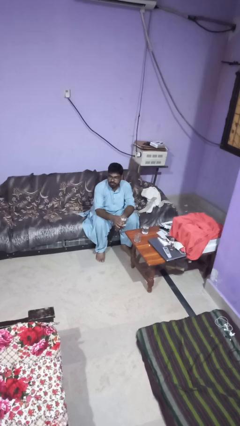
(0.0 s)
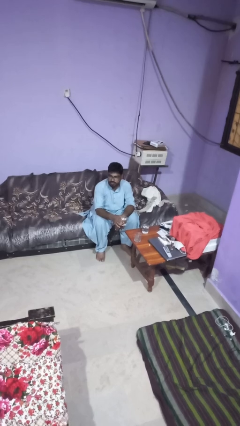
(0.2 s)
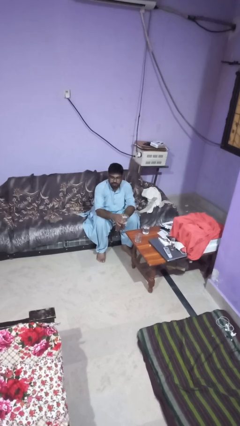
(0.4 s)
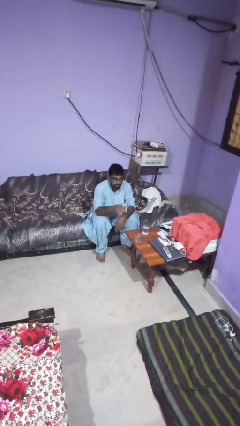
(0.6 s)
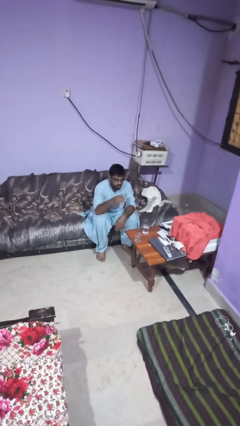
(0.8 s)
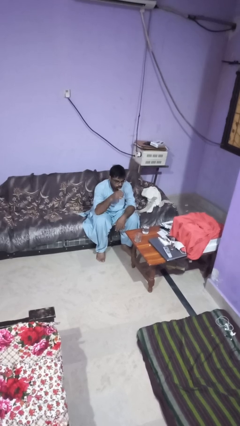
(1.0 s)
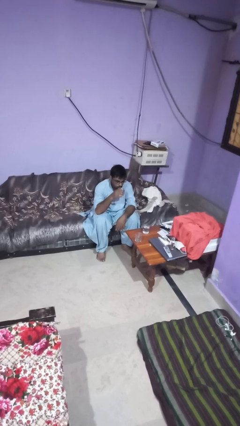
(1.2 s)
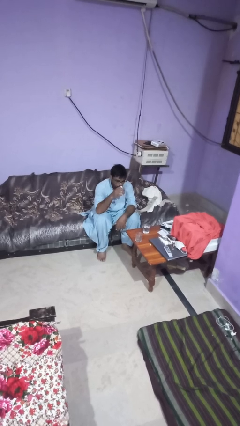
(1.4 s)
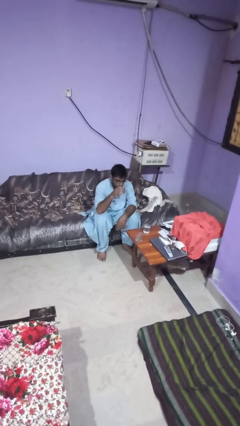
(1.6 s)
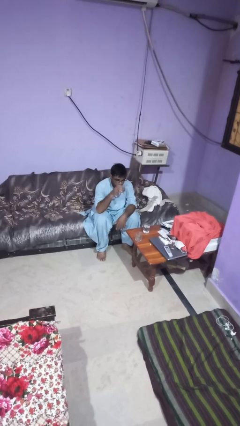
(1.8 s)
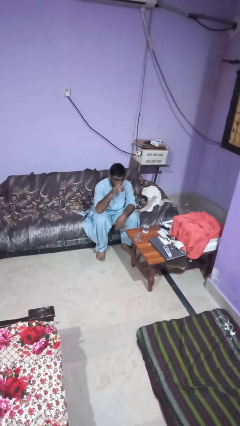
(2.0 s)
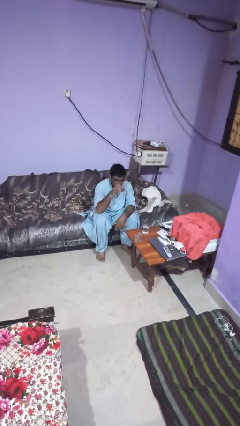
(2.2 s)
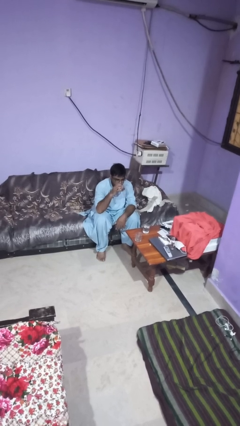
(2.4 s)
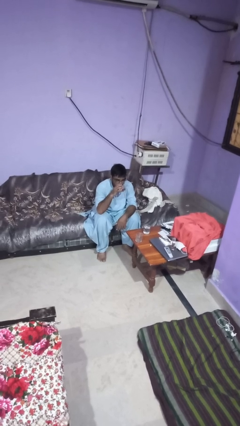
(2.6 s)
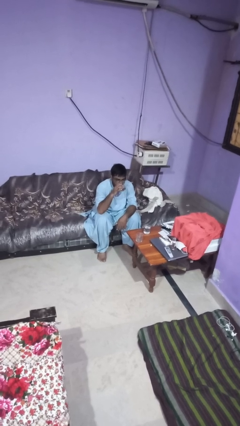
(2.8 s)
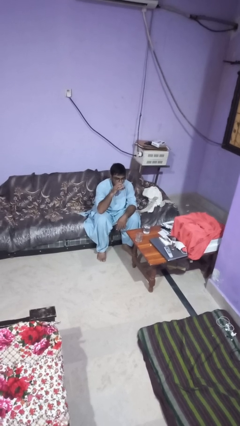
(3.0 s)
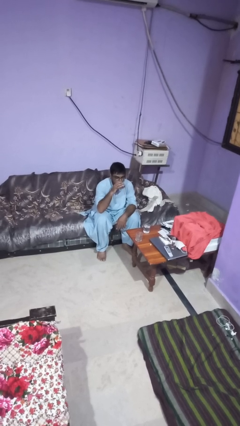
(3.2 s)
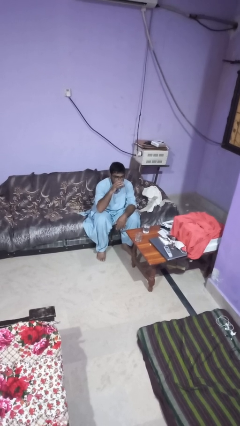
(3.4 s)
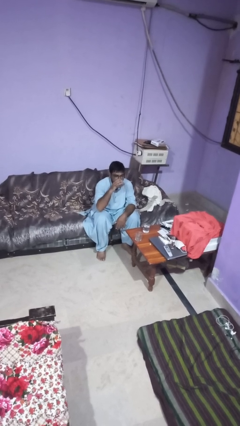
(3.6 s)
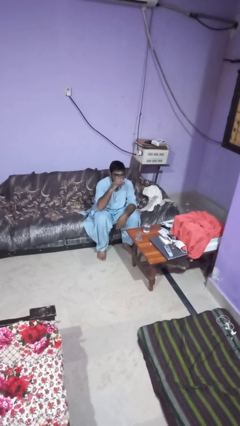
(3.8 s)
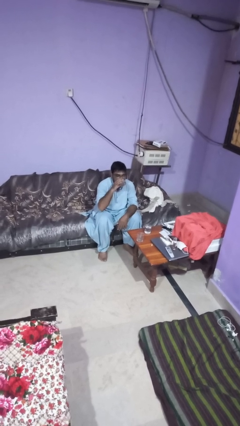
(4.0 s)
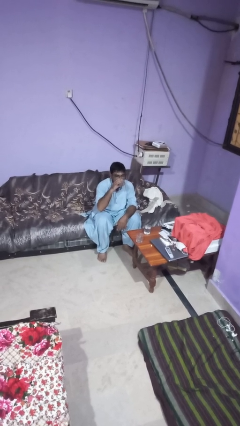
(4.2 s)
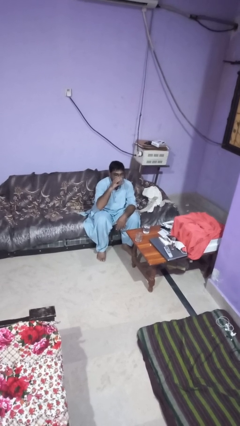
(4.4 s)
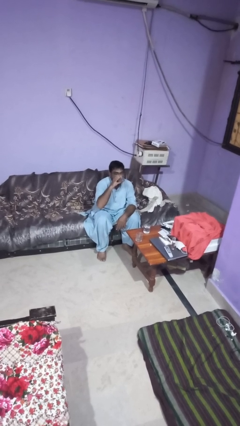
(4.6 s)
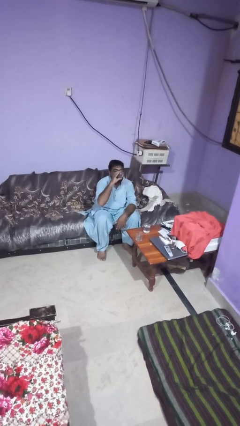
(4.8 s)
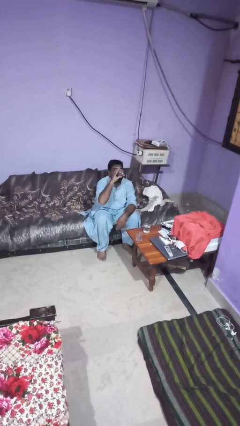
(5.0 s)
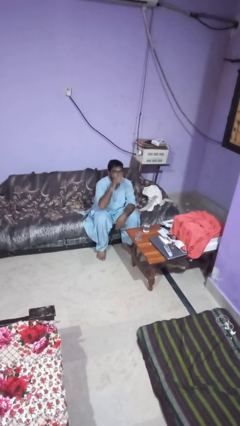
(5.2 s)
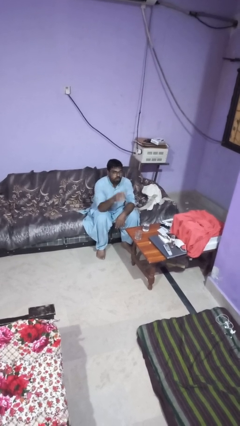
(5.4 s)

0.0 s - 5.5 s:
person drinks from shotglass

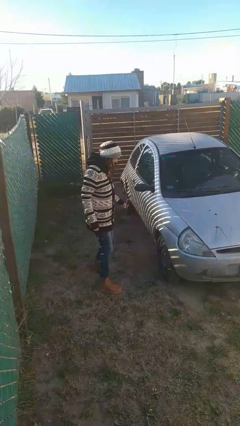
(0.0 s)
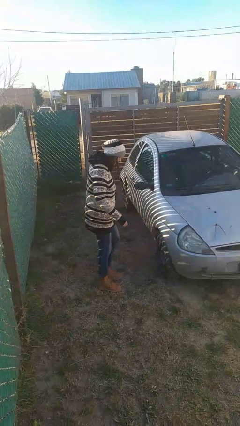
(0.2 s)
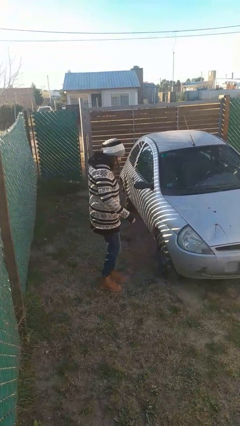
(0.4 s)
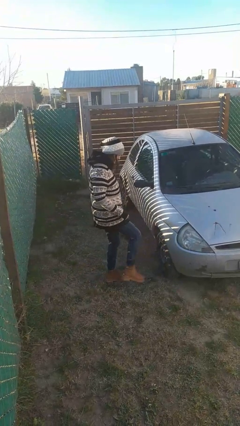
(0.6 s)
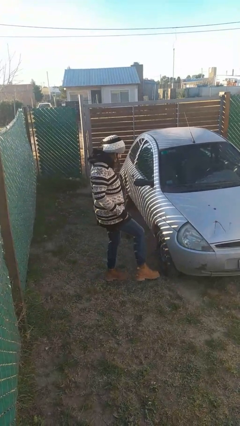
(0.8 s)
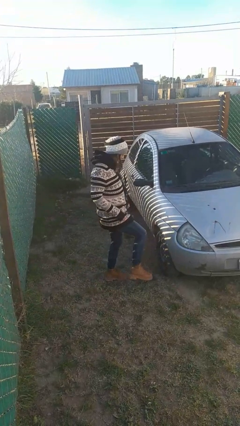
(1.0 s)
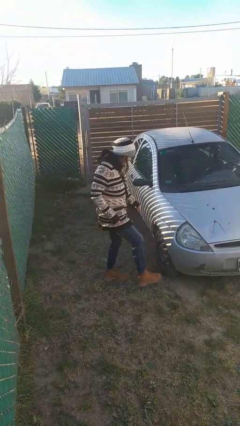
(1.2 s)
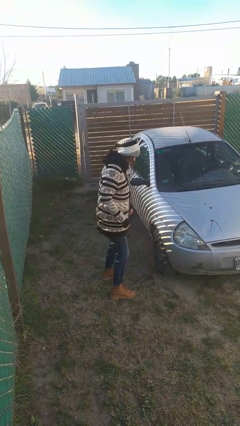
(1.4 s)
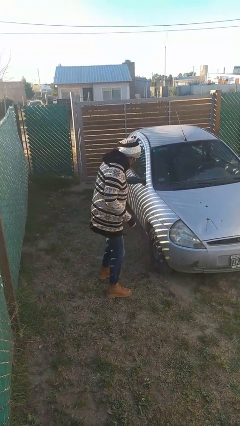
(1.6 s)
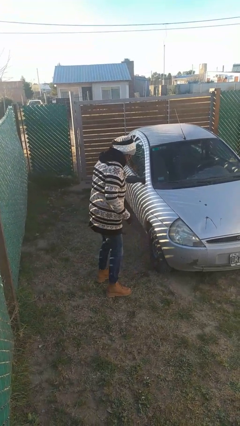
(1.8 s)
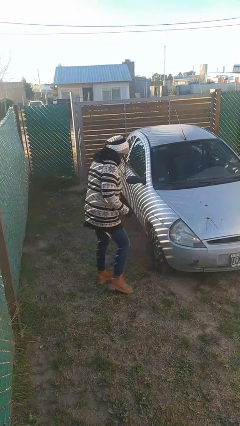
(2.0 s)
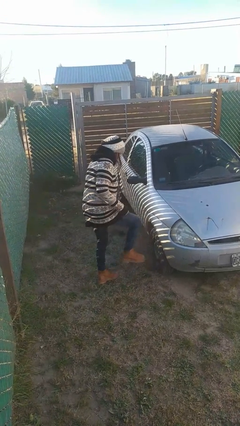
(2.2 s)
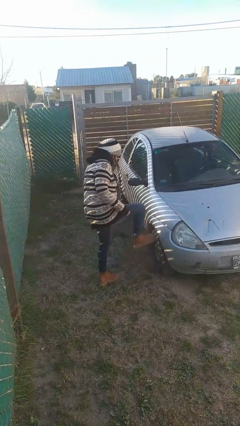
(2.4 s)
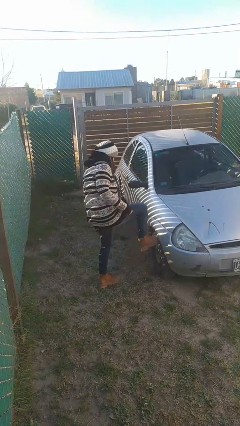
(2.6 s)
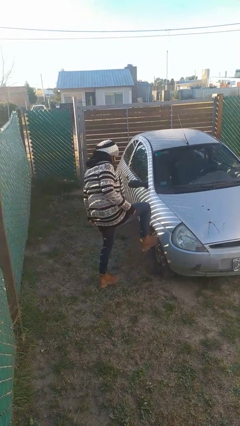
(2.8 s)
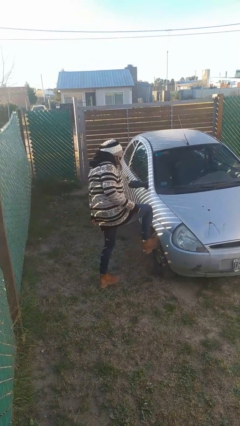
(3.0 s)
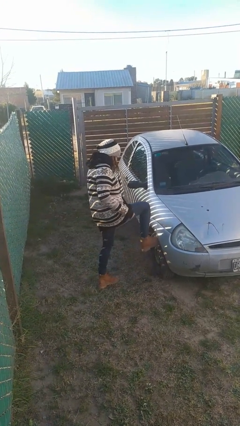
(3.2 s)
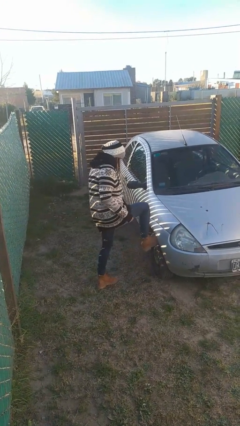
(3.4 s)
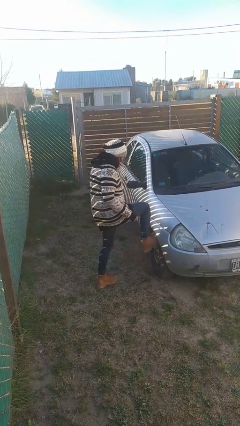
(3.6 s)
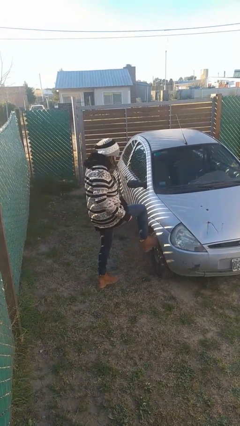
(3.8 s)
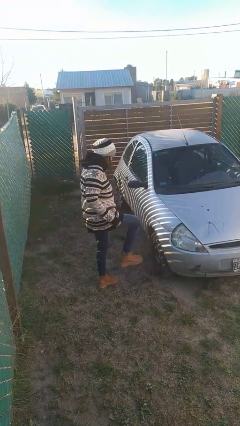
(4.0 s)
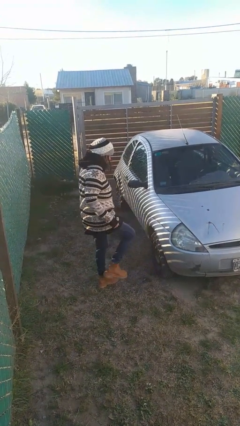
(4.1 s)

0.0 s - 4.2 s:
person kicks car tires

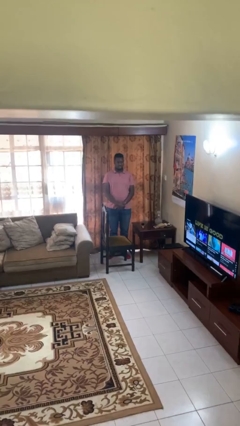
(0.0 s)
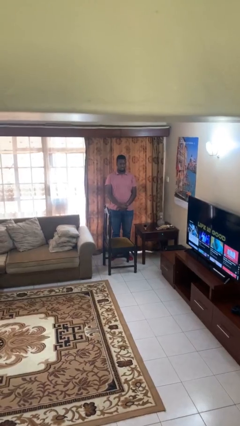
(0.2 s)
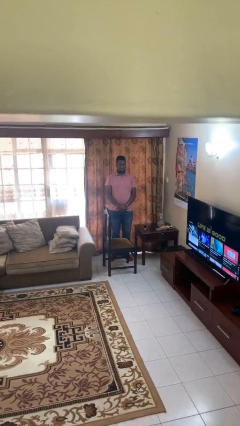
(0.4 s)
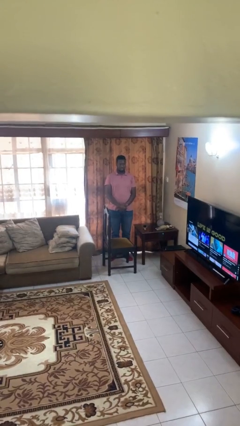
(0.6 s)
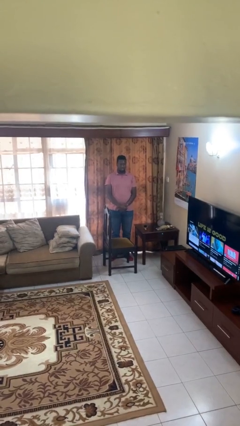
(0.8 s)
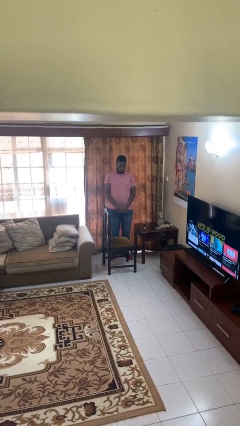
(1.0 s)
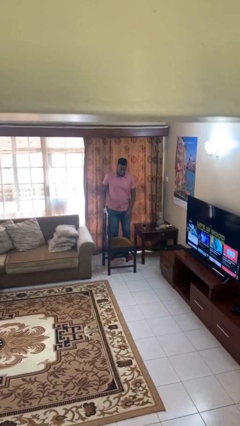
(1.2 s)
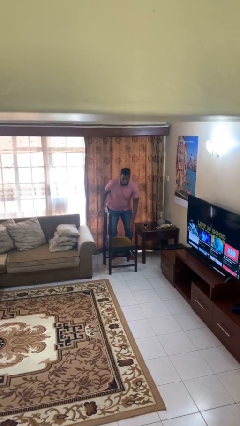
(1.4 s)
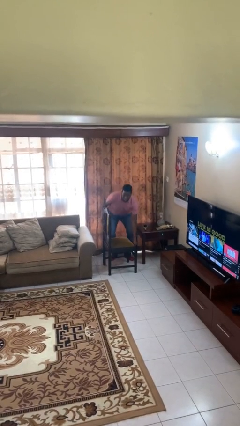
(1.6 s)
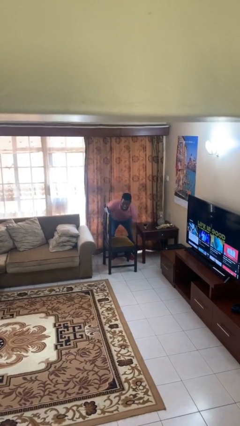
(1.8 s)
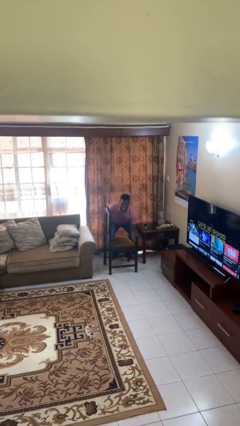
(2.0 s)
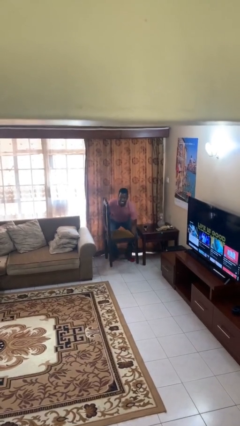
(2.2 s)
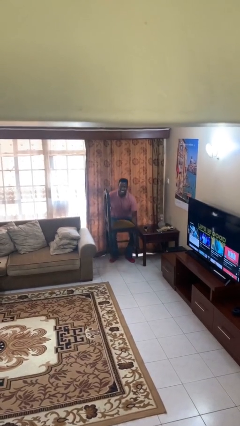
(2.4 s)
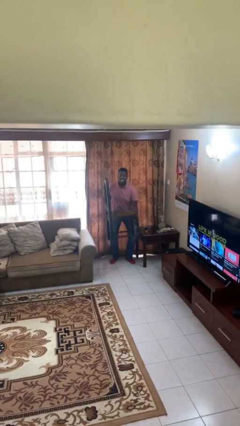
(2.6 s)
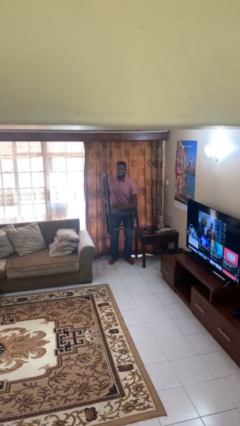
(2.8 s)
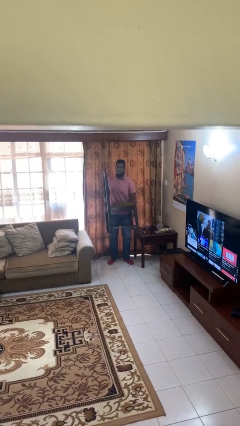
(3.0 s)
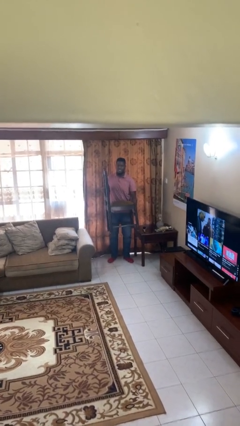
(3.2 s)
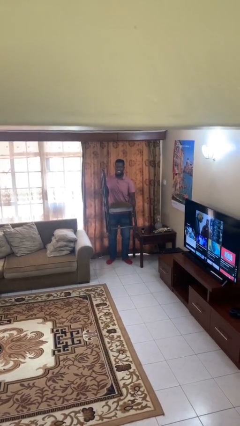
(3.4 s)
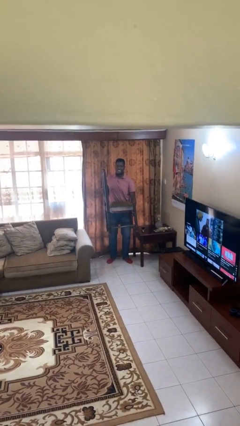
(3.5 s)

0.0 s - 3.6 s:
person picks up object from floor

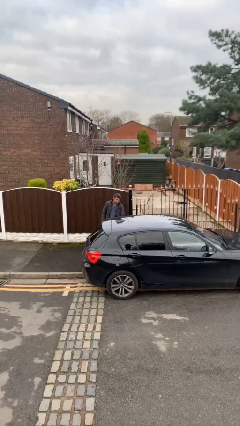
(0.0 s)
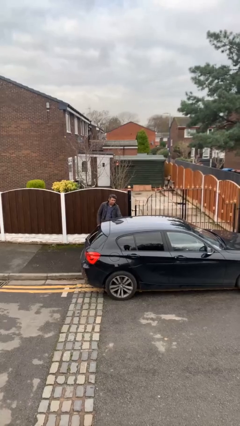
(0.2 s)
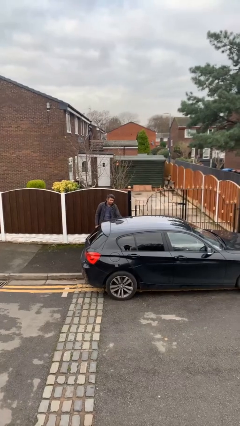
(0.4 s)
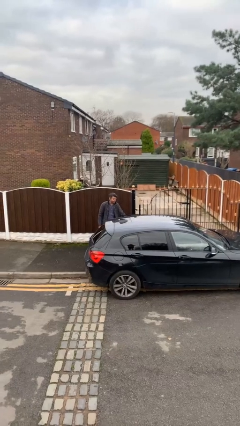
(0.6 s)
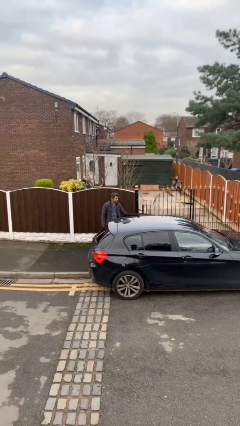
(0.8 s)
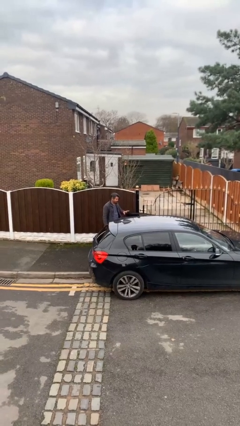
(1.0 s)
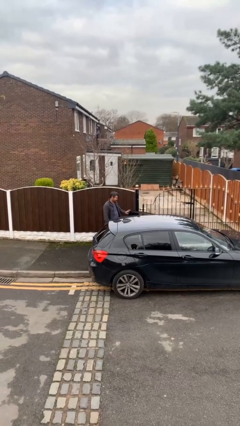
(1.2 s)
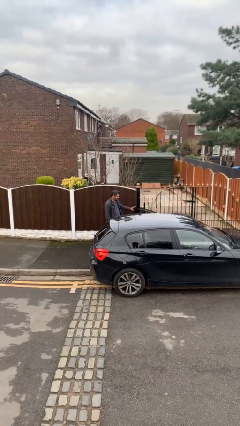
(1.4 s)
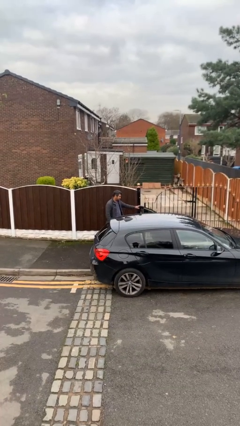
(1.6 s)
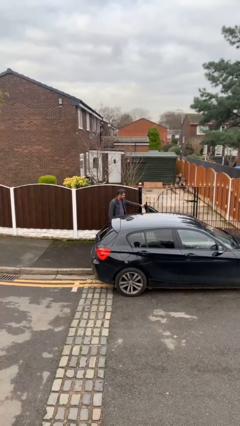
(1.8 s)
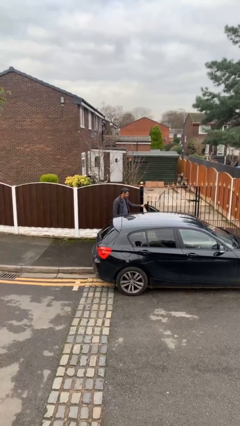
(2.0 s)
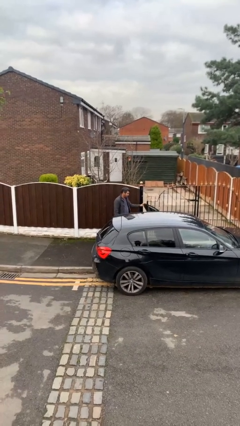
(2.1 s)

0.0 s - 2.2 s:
person opens car door

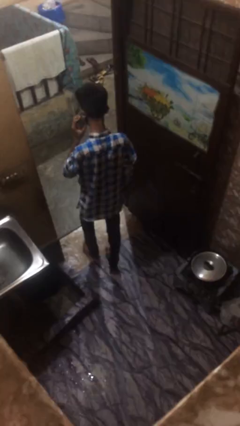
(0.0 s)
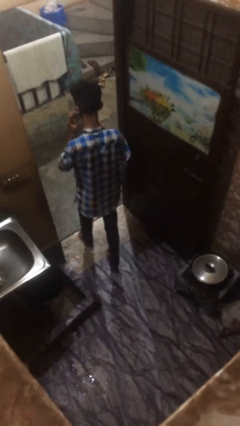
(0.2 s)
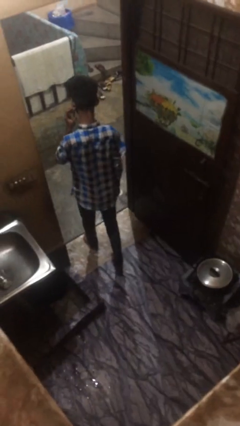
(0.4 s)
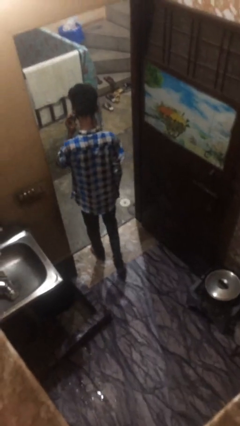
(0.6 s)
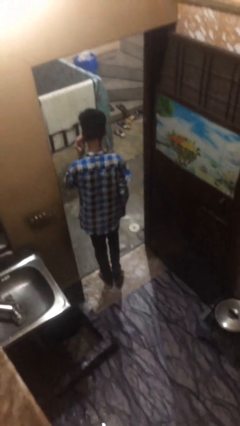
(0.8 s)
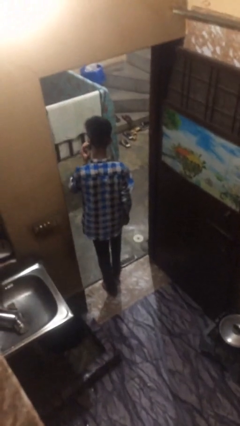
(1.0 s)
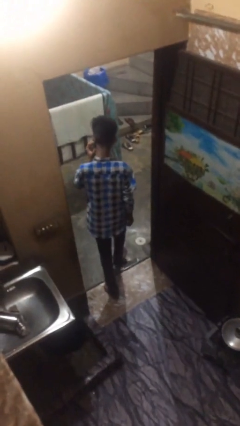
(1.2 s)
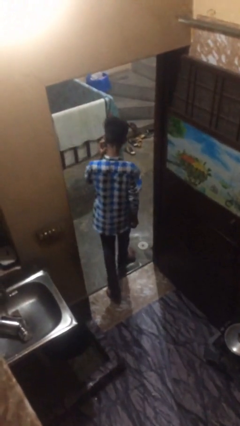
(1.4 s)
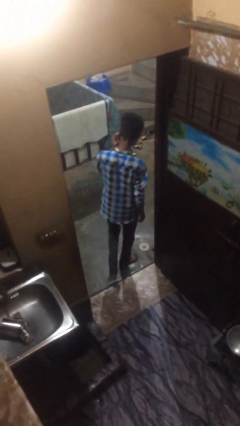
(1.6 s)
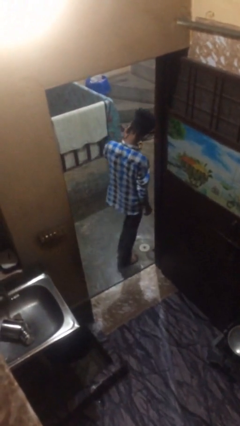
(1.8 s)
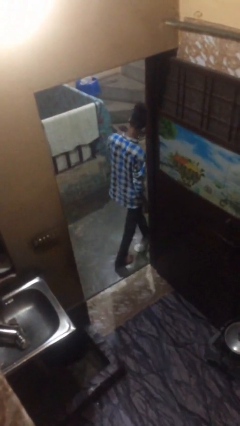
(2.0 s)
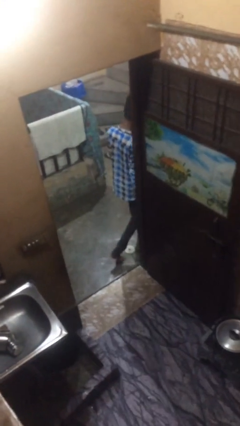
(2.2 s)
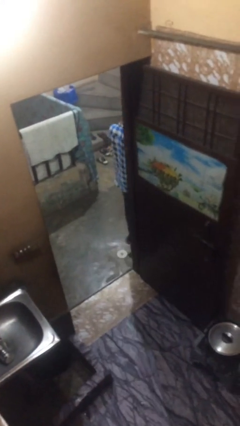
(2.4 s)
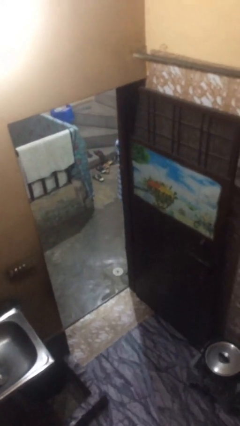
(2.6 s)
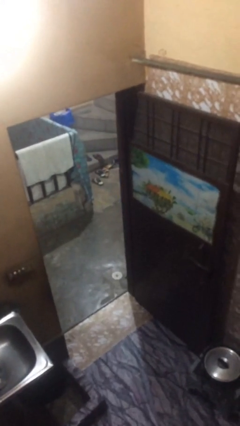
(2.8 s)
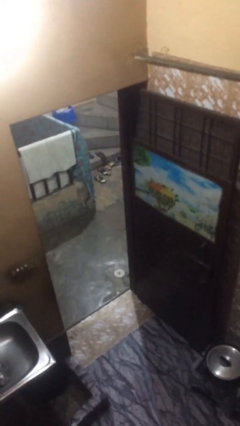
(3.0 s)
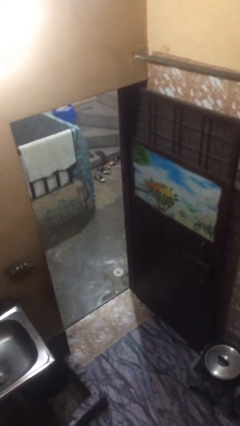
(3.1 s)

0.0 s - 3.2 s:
person exits scene through structure
